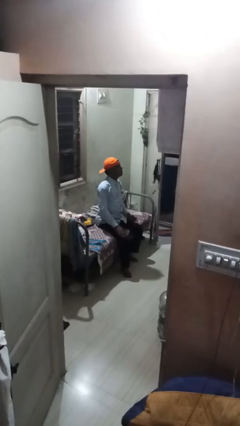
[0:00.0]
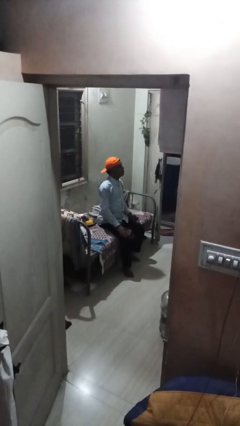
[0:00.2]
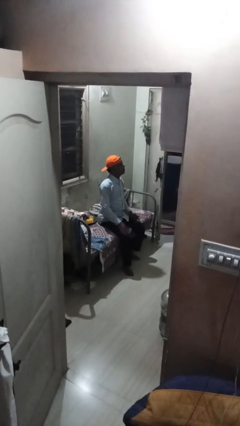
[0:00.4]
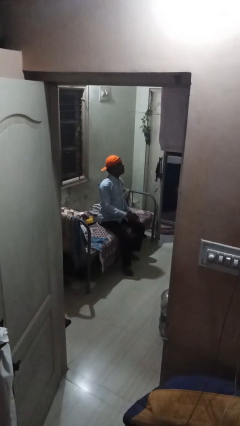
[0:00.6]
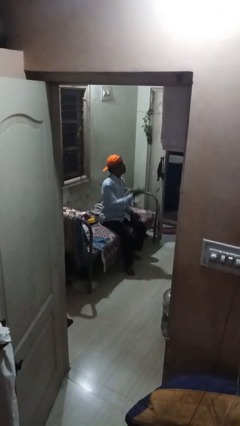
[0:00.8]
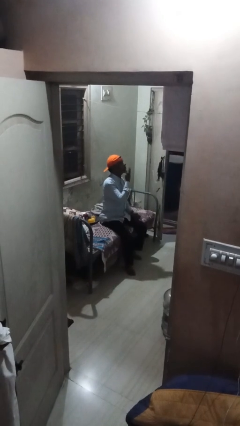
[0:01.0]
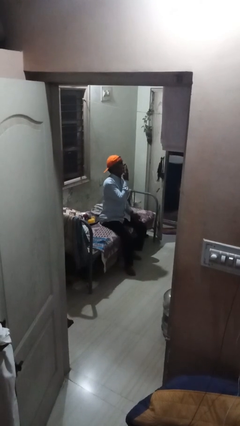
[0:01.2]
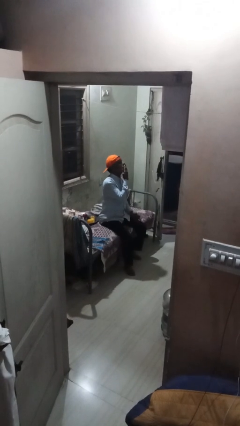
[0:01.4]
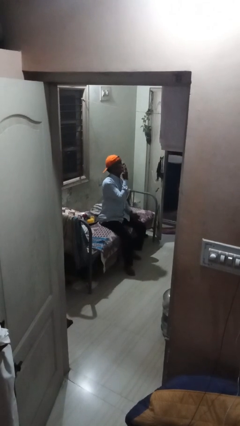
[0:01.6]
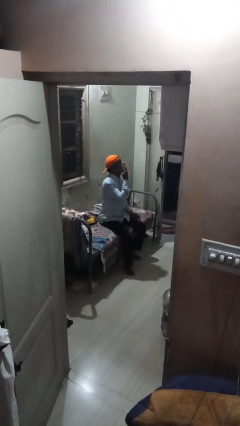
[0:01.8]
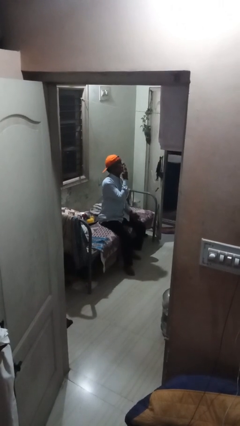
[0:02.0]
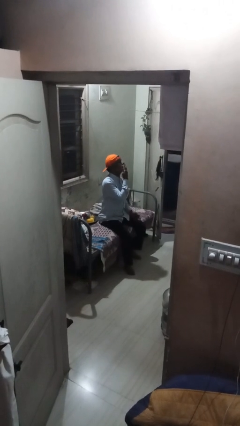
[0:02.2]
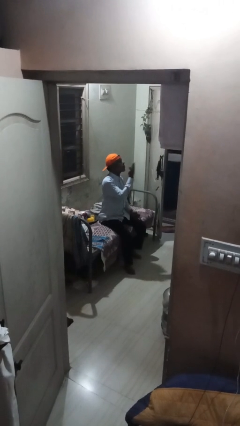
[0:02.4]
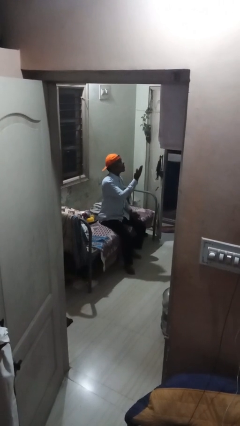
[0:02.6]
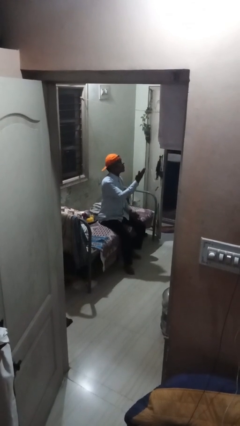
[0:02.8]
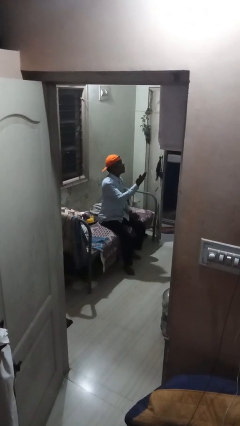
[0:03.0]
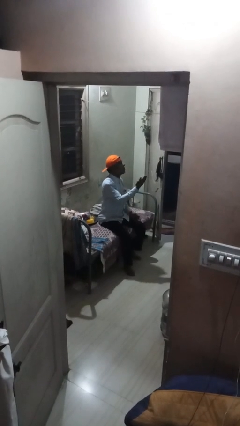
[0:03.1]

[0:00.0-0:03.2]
person gestures blow kiss

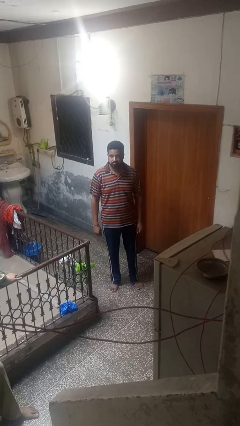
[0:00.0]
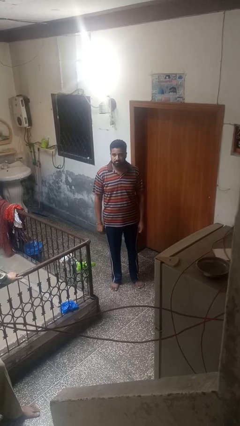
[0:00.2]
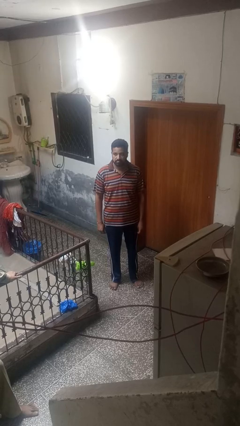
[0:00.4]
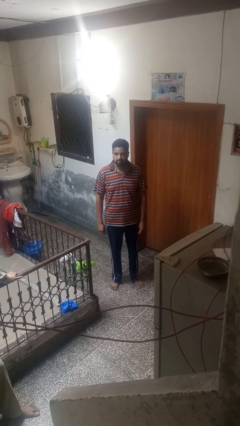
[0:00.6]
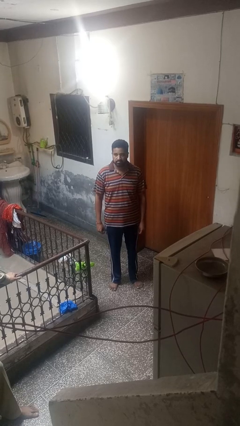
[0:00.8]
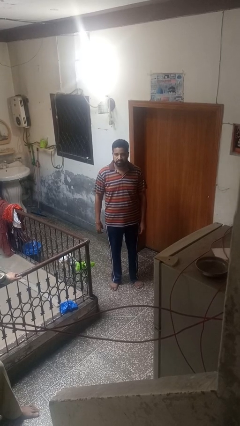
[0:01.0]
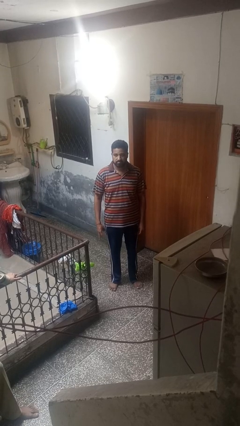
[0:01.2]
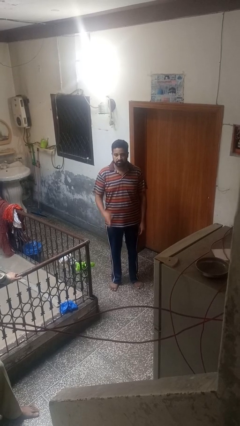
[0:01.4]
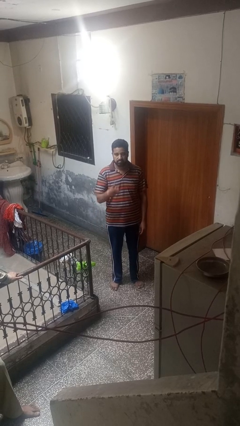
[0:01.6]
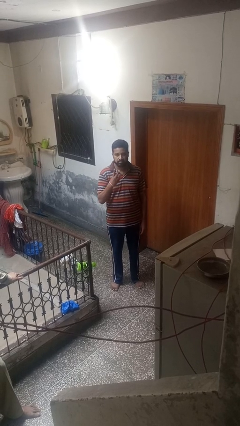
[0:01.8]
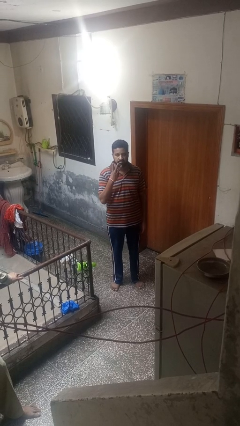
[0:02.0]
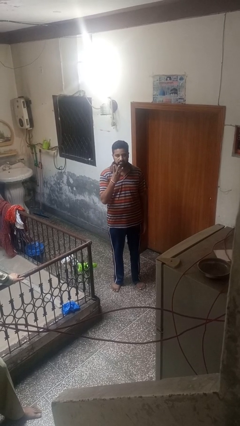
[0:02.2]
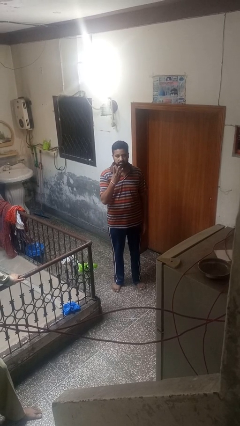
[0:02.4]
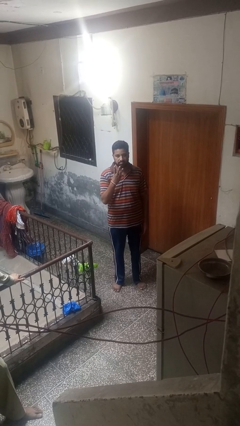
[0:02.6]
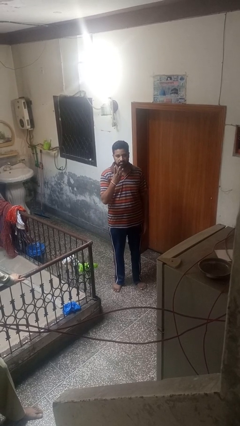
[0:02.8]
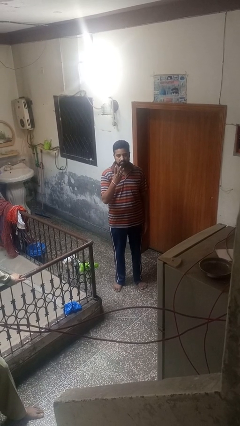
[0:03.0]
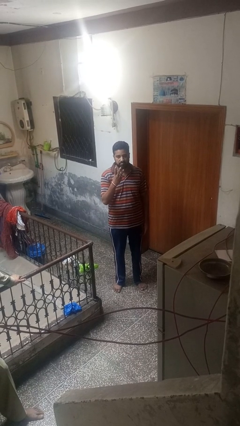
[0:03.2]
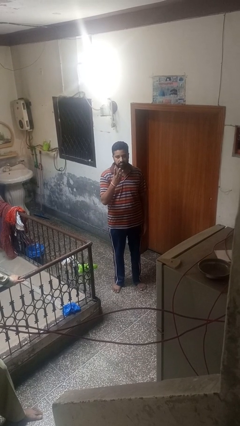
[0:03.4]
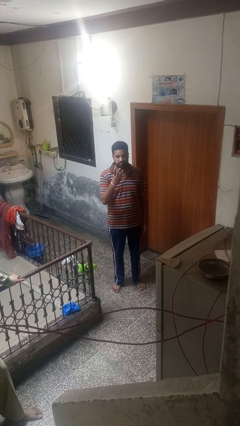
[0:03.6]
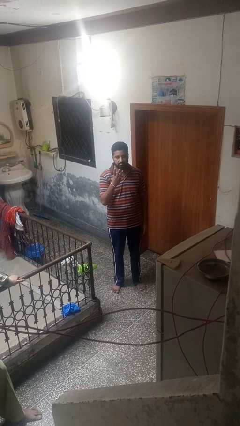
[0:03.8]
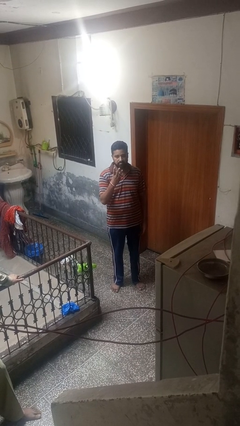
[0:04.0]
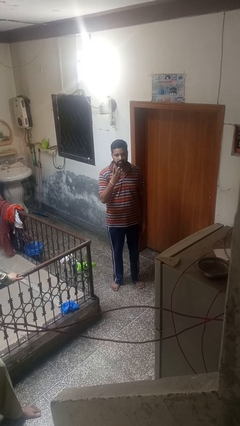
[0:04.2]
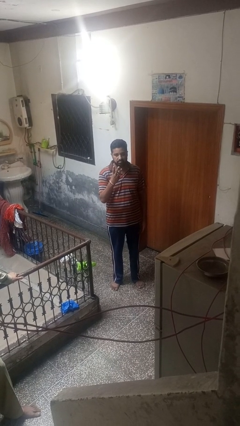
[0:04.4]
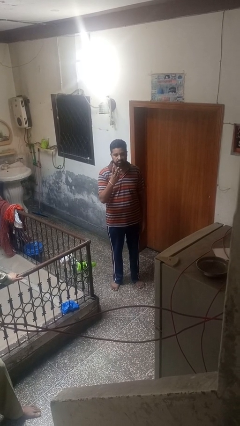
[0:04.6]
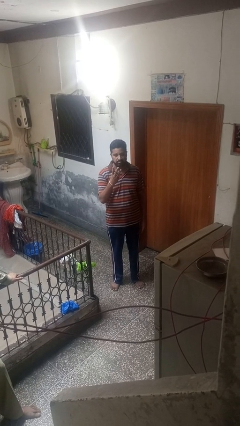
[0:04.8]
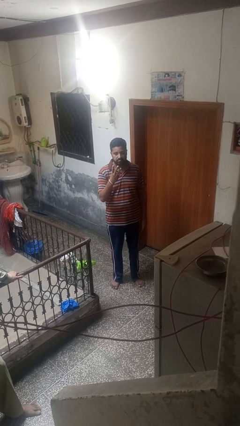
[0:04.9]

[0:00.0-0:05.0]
person gestures number three

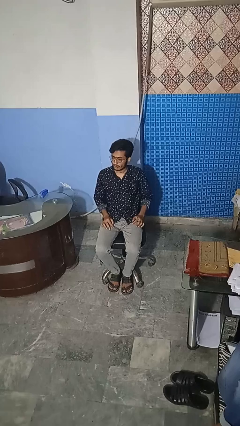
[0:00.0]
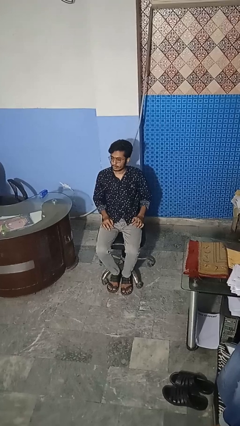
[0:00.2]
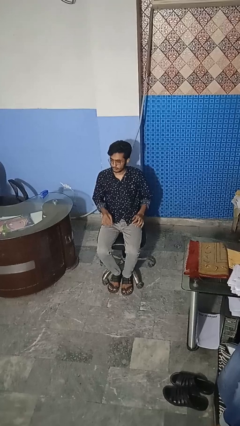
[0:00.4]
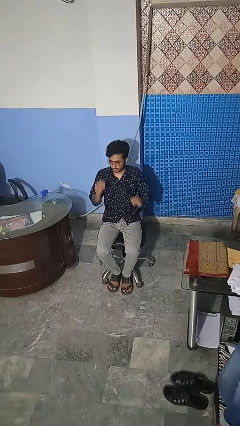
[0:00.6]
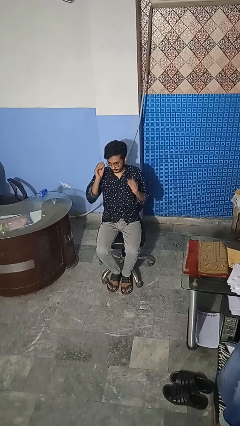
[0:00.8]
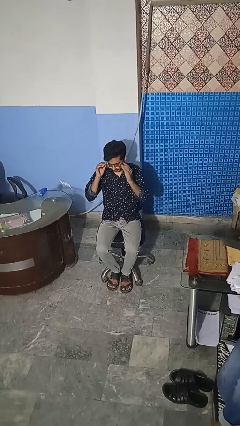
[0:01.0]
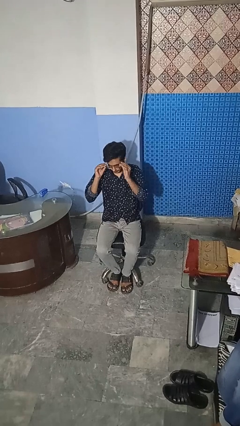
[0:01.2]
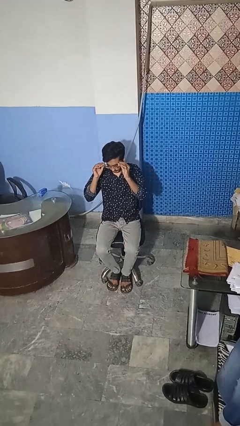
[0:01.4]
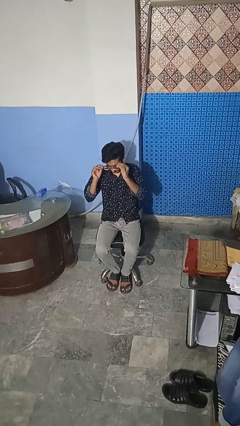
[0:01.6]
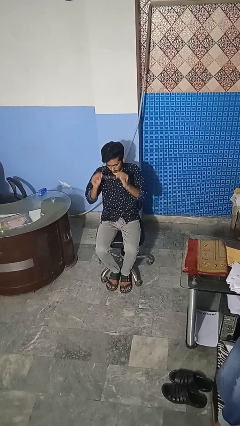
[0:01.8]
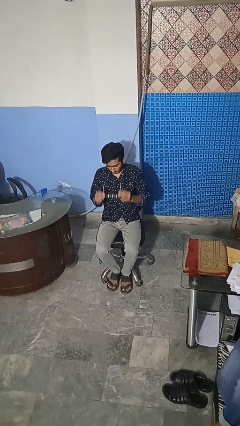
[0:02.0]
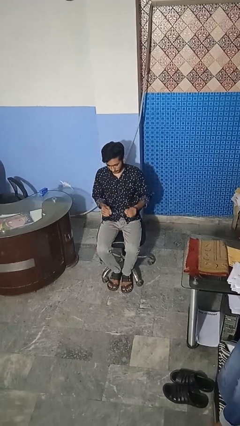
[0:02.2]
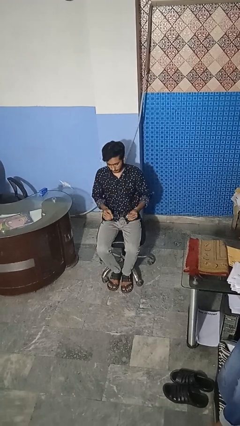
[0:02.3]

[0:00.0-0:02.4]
person takes off glasses

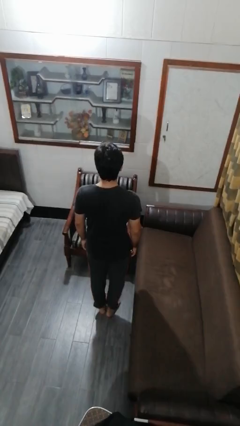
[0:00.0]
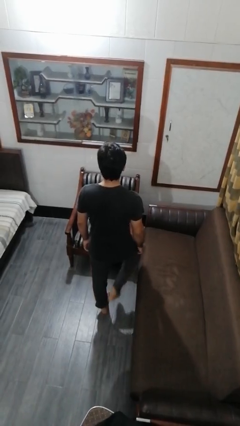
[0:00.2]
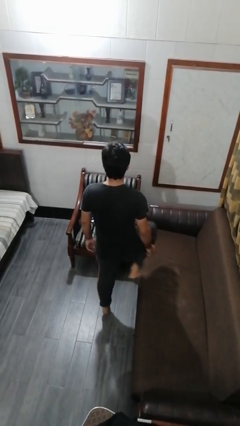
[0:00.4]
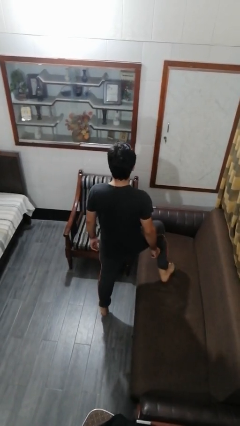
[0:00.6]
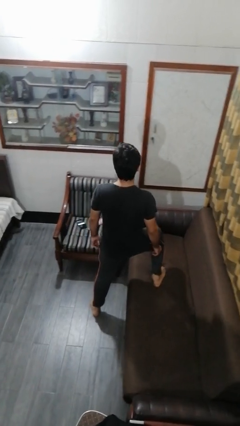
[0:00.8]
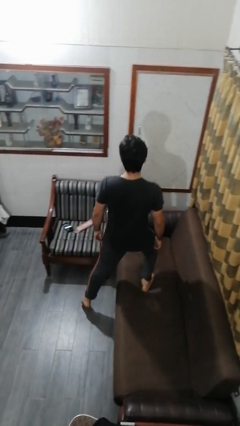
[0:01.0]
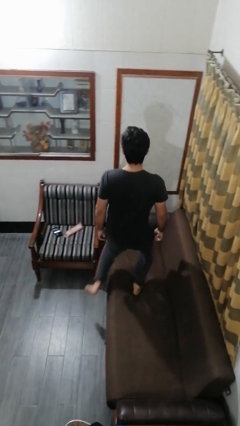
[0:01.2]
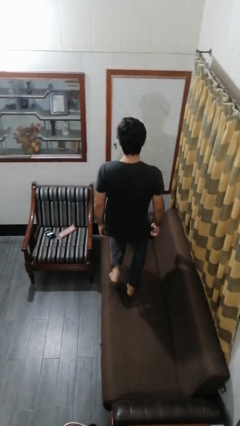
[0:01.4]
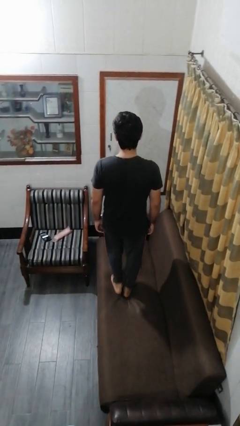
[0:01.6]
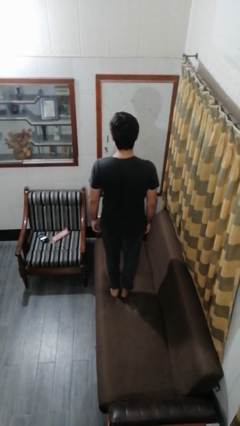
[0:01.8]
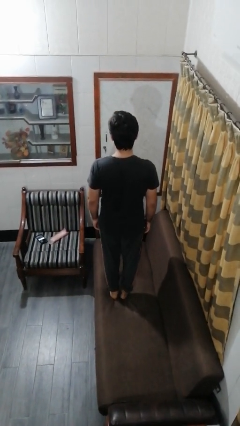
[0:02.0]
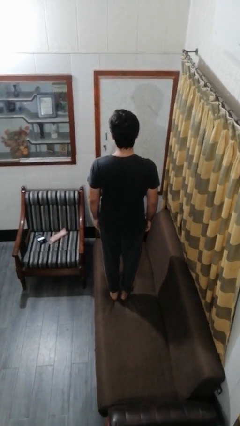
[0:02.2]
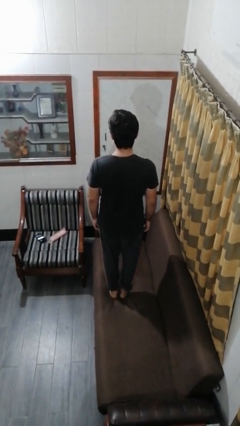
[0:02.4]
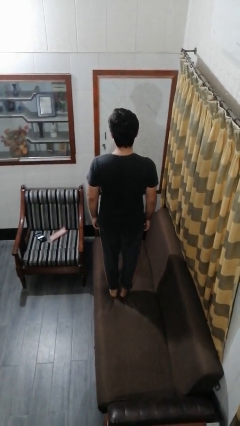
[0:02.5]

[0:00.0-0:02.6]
person climbs on couch

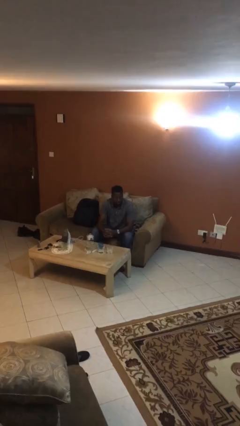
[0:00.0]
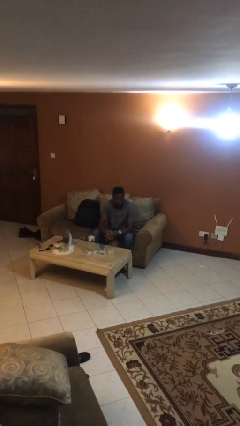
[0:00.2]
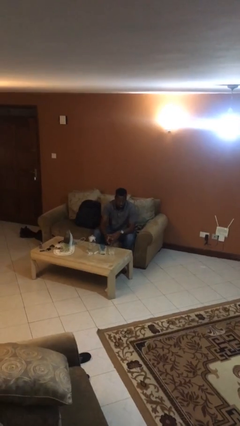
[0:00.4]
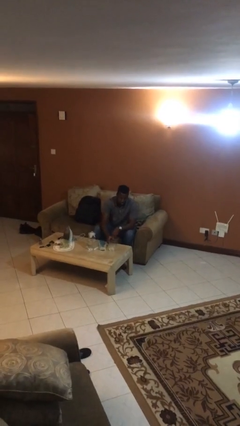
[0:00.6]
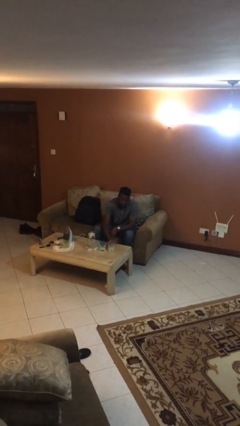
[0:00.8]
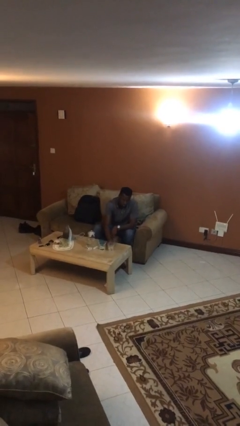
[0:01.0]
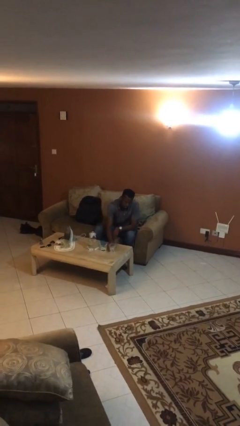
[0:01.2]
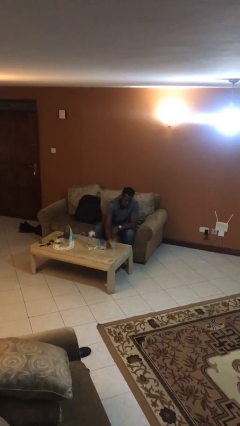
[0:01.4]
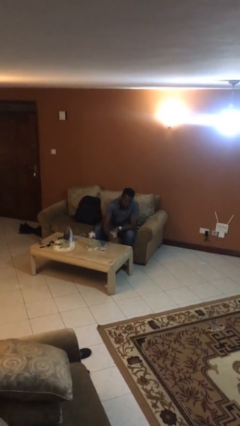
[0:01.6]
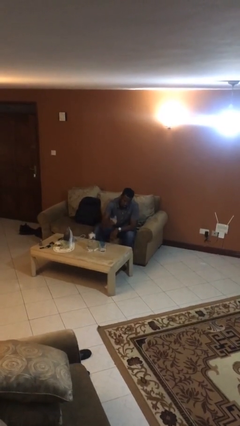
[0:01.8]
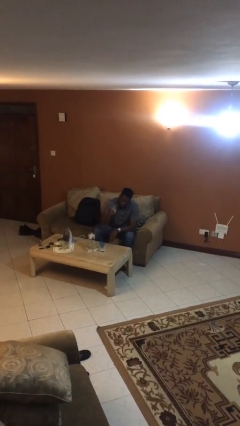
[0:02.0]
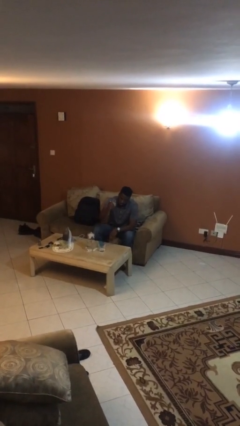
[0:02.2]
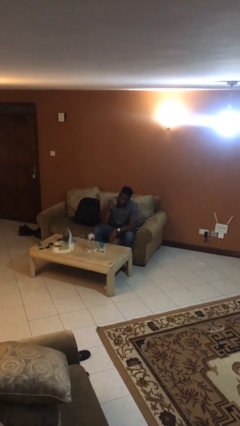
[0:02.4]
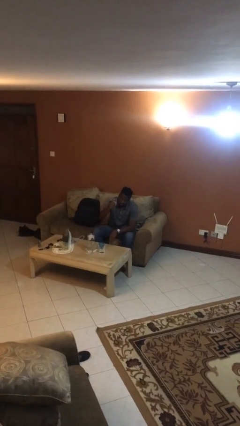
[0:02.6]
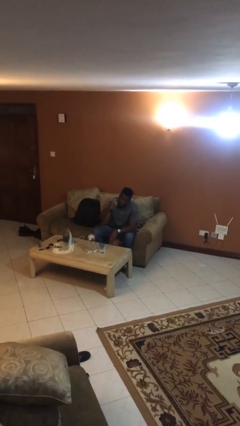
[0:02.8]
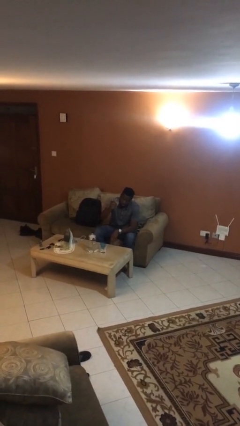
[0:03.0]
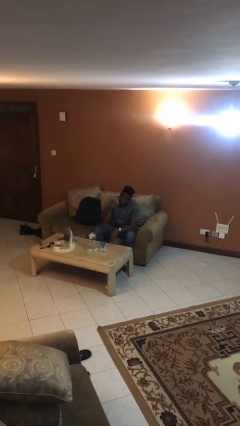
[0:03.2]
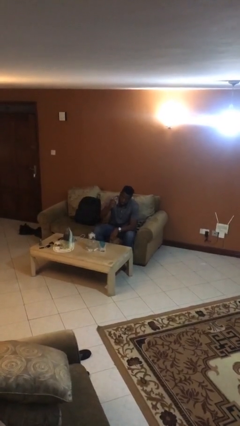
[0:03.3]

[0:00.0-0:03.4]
person picks up object from table

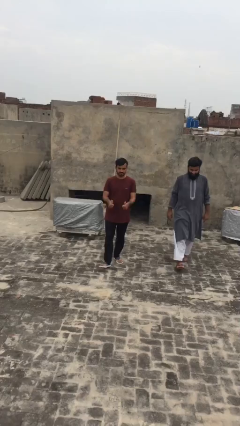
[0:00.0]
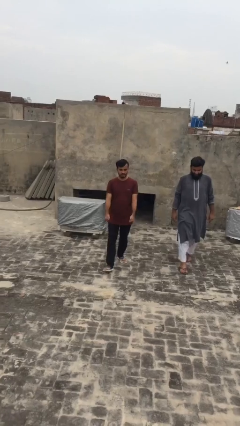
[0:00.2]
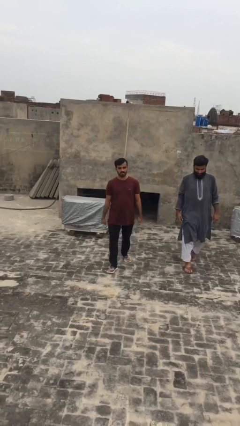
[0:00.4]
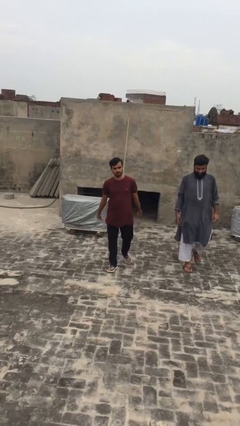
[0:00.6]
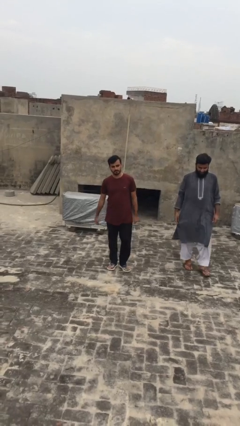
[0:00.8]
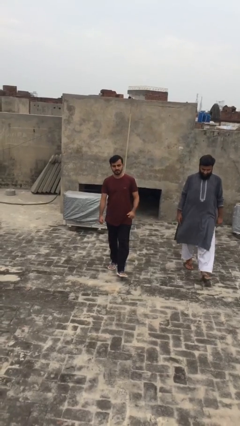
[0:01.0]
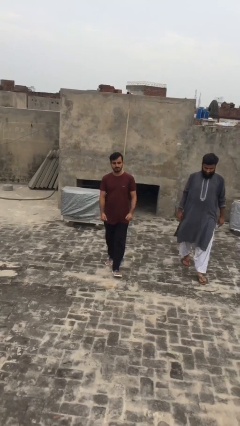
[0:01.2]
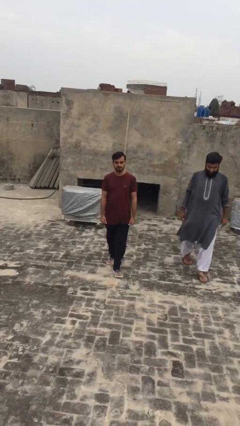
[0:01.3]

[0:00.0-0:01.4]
person talks to person
